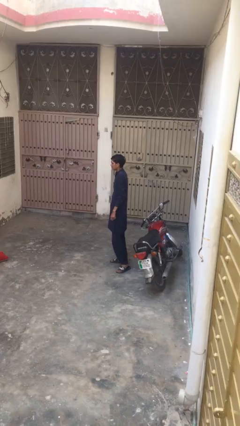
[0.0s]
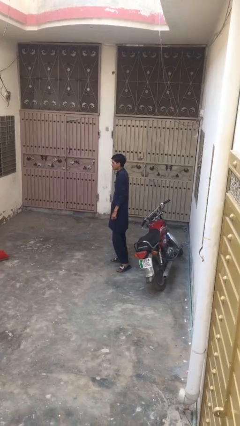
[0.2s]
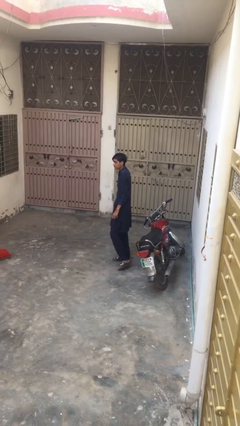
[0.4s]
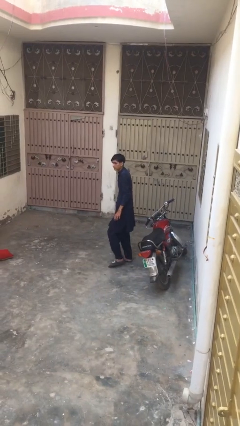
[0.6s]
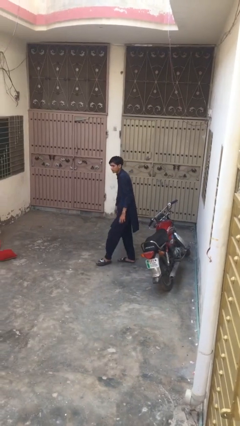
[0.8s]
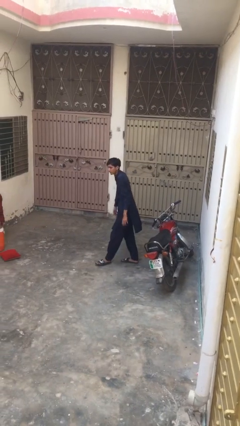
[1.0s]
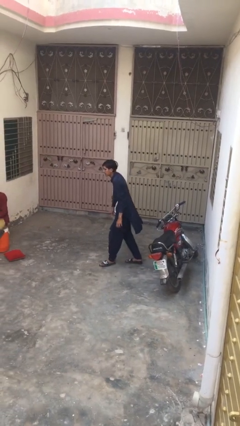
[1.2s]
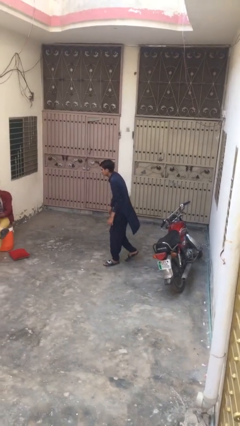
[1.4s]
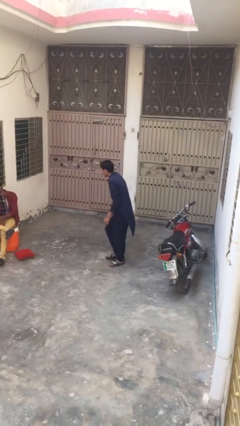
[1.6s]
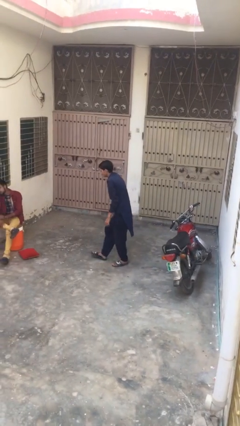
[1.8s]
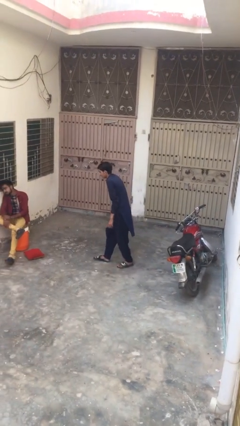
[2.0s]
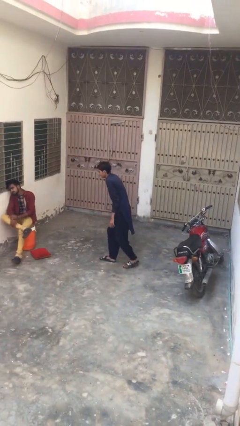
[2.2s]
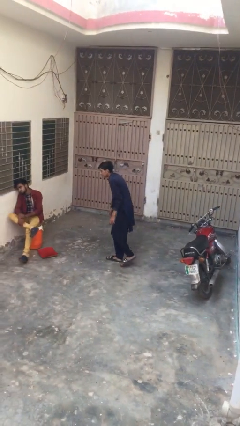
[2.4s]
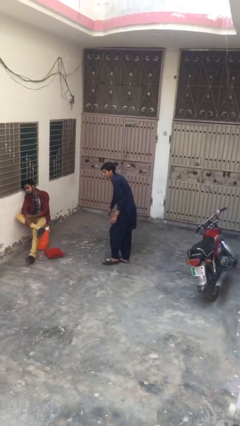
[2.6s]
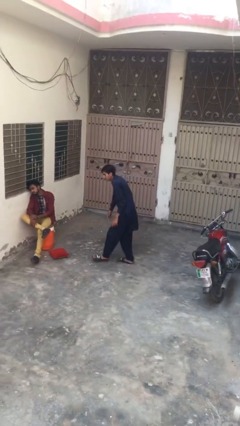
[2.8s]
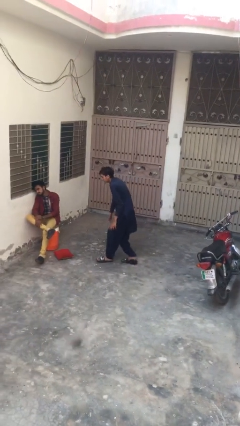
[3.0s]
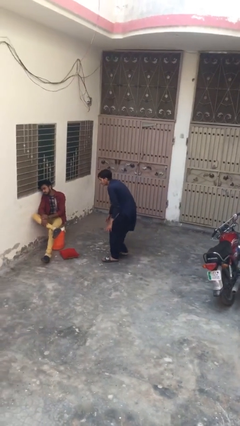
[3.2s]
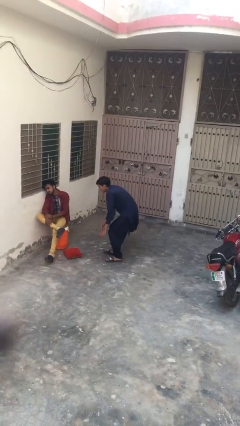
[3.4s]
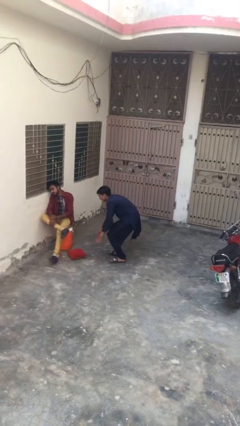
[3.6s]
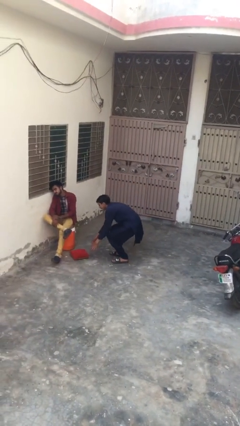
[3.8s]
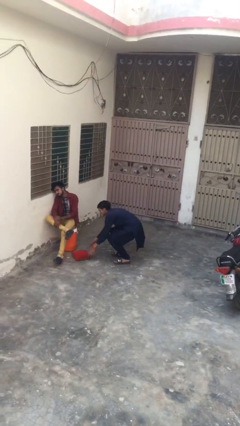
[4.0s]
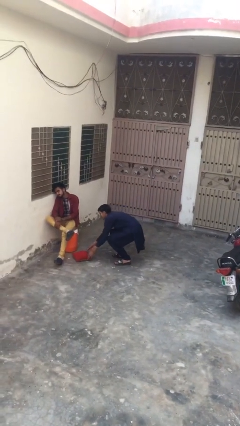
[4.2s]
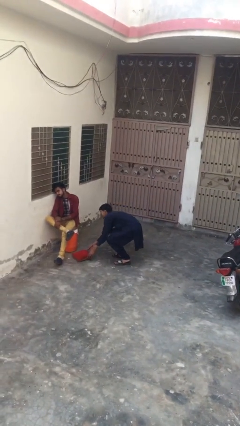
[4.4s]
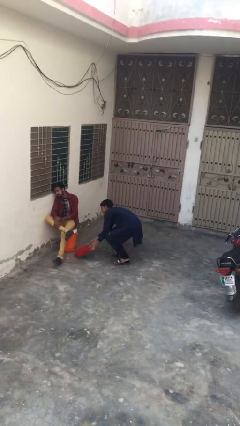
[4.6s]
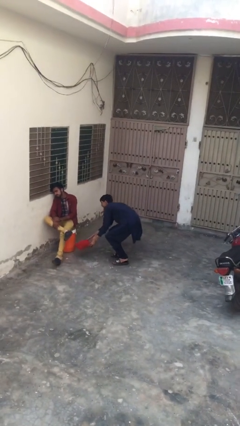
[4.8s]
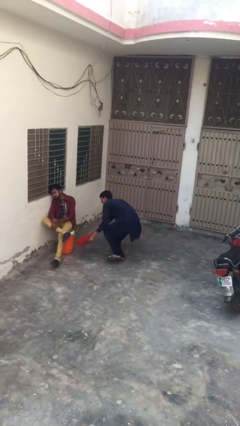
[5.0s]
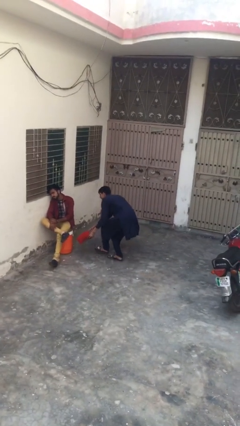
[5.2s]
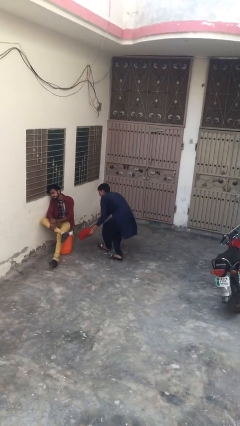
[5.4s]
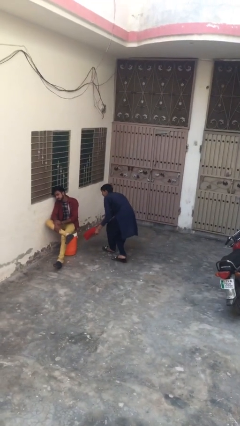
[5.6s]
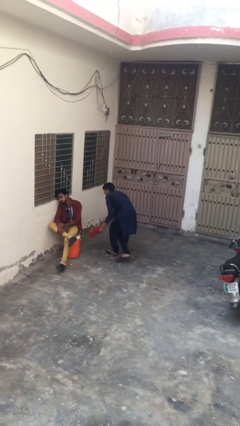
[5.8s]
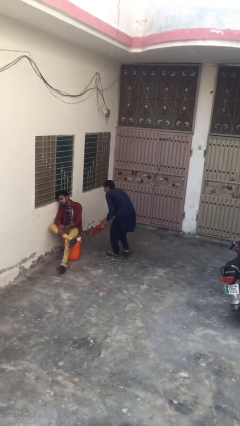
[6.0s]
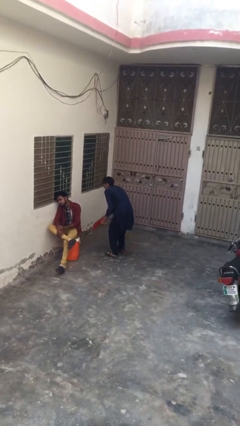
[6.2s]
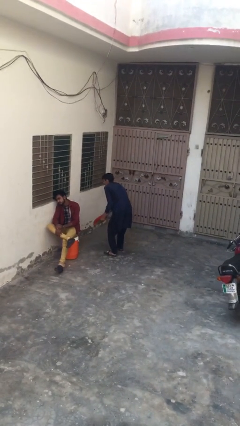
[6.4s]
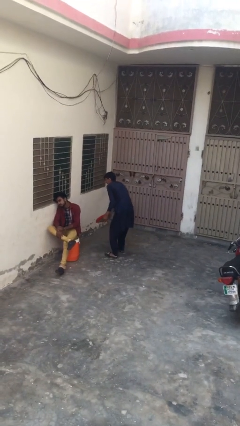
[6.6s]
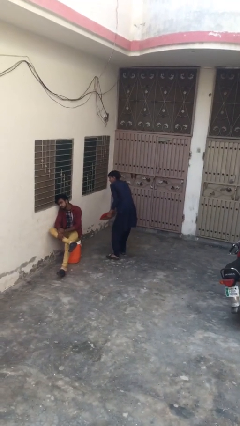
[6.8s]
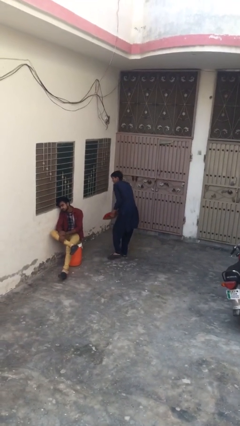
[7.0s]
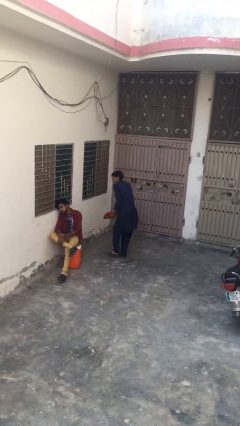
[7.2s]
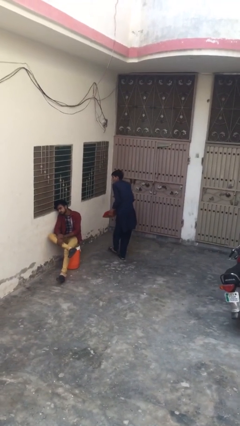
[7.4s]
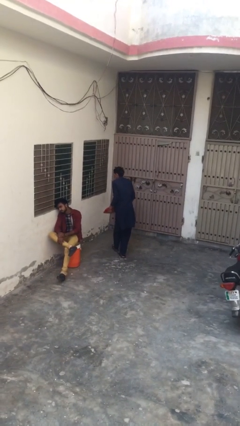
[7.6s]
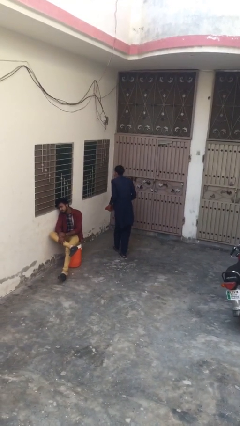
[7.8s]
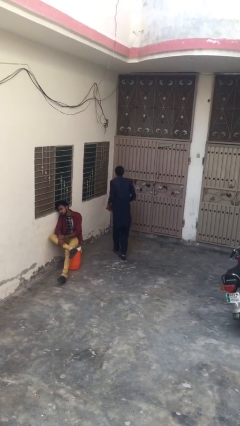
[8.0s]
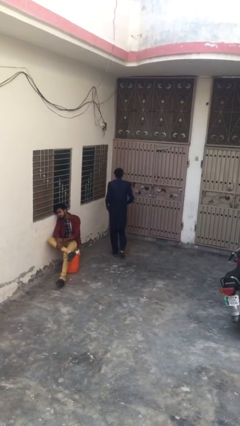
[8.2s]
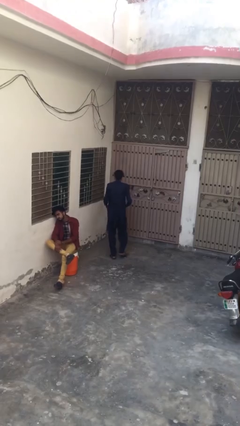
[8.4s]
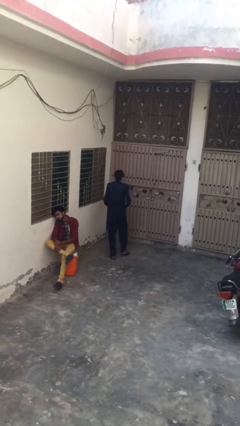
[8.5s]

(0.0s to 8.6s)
person steals object from person

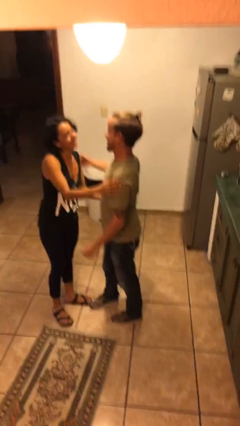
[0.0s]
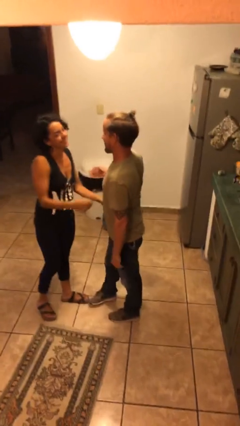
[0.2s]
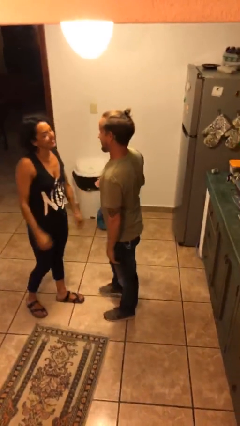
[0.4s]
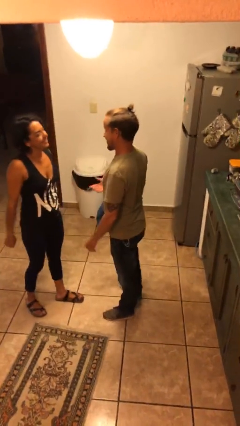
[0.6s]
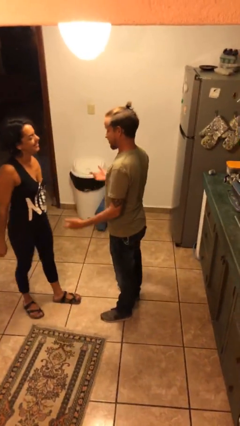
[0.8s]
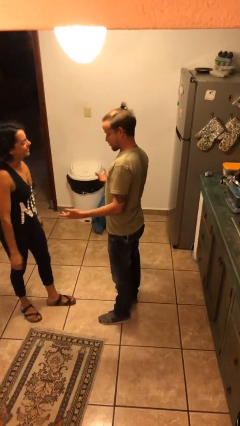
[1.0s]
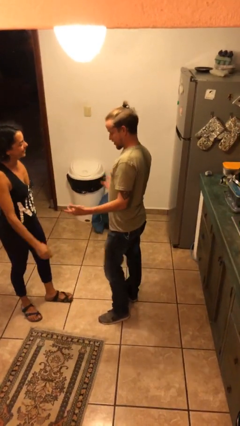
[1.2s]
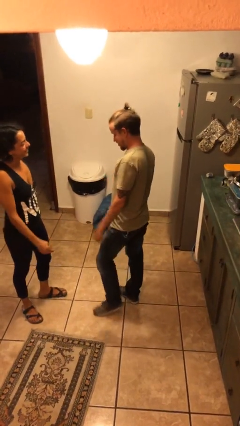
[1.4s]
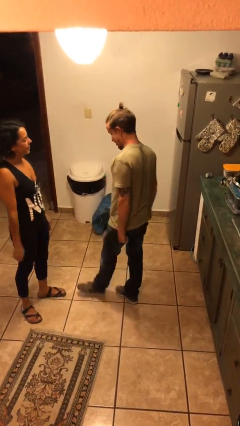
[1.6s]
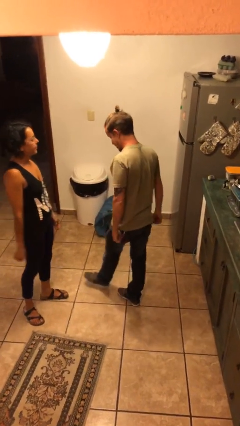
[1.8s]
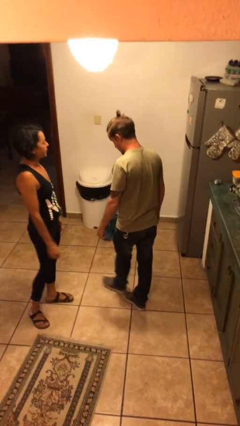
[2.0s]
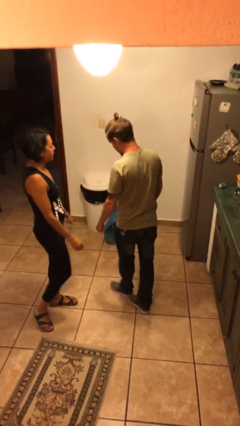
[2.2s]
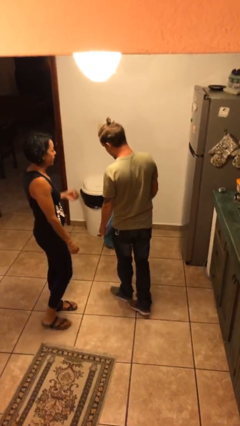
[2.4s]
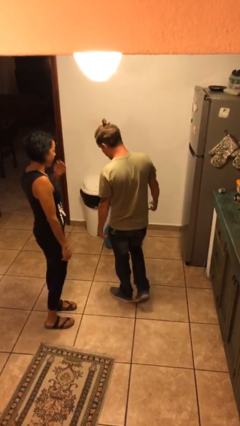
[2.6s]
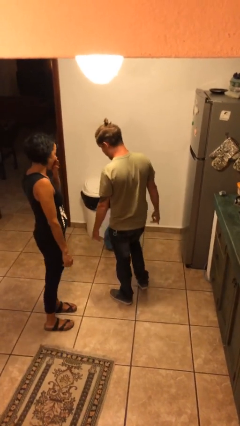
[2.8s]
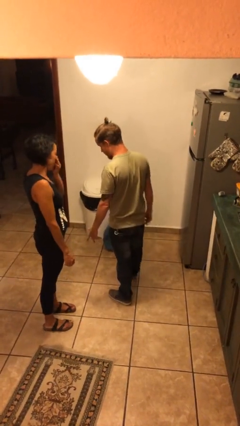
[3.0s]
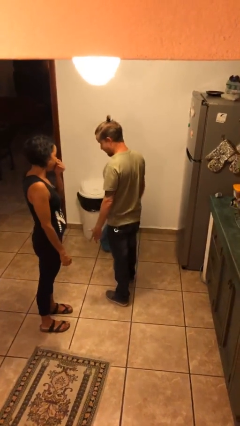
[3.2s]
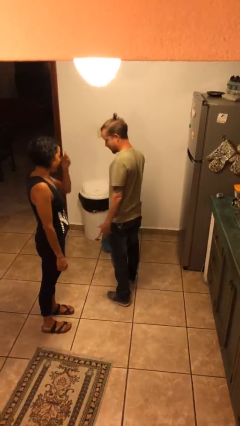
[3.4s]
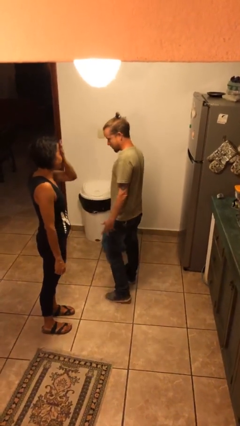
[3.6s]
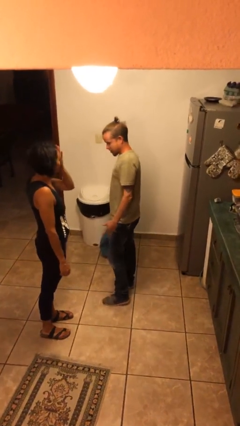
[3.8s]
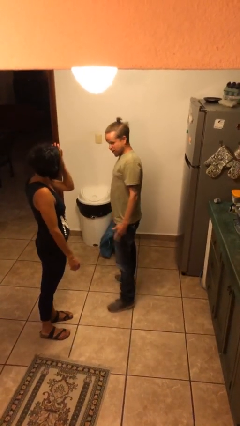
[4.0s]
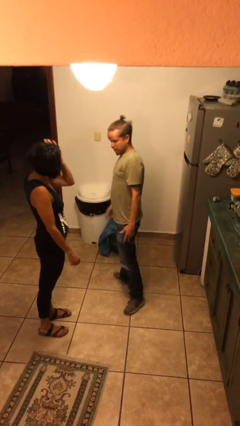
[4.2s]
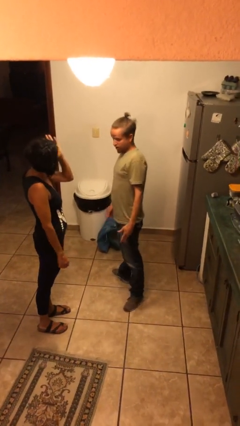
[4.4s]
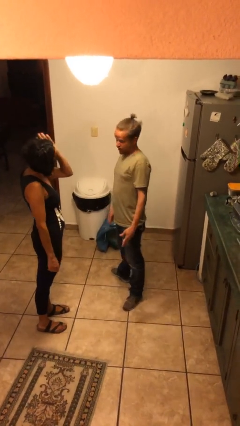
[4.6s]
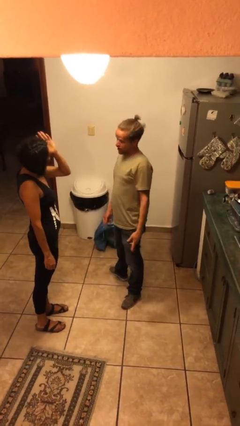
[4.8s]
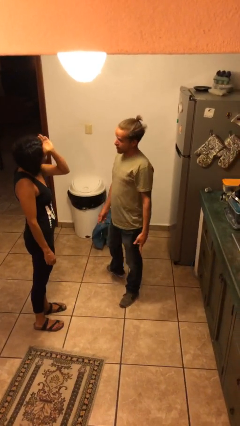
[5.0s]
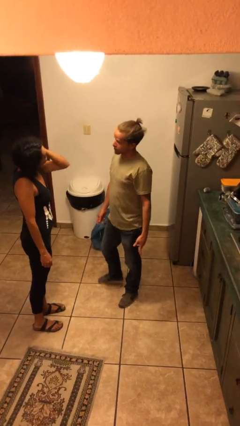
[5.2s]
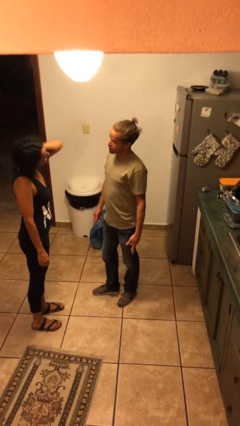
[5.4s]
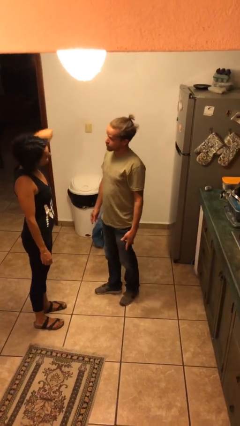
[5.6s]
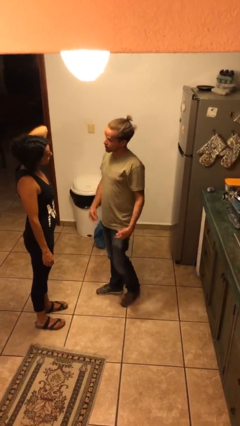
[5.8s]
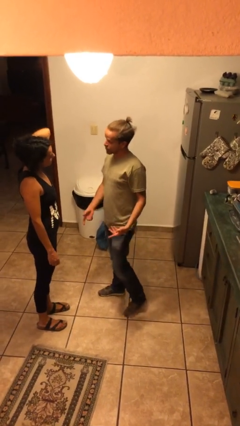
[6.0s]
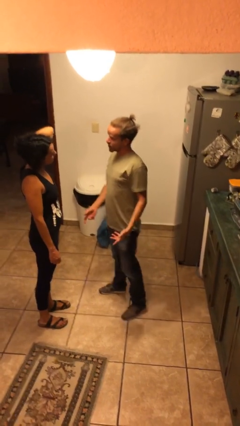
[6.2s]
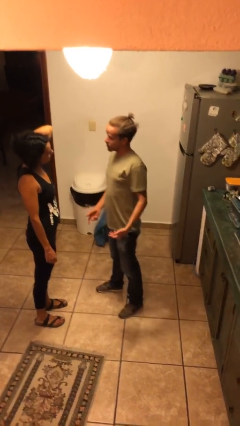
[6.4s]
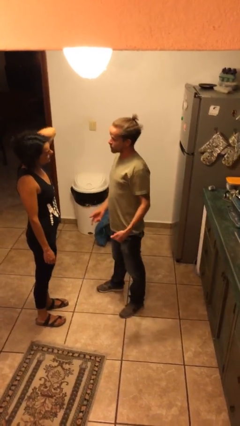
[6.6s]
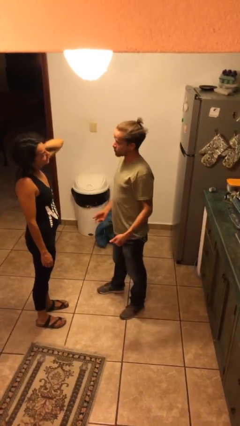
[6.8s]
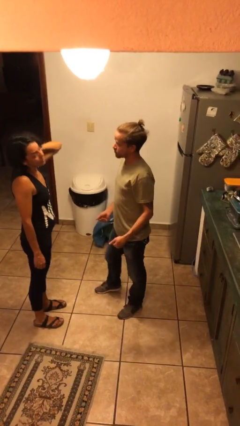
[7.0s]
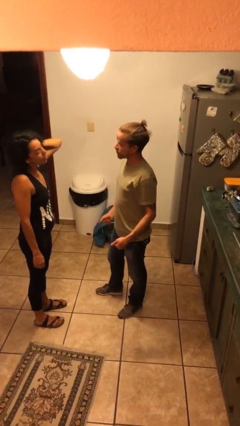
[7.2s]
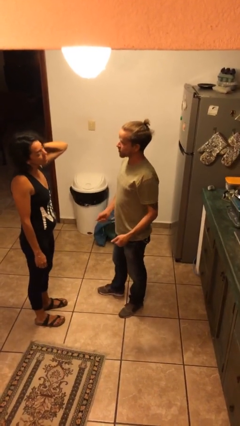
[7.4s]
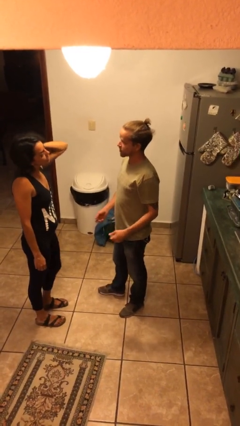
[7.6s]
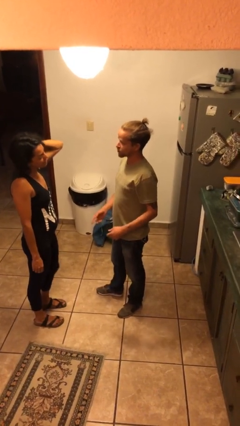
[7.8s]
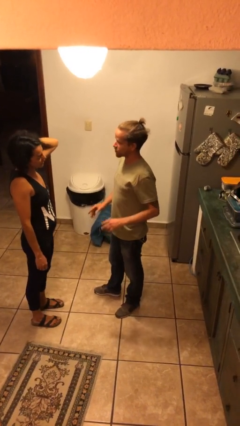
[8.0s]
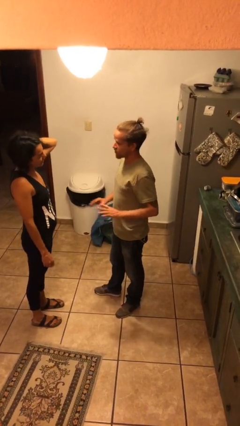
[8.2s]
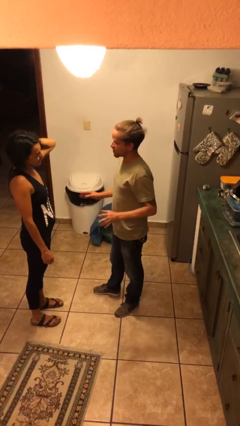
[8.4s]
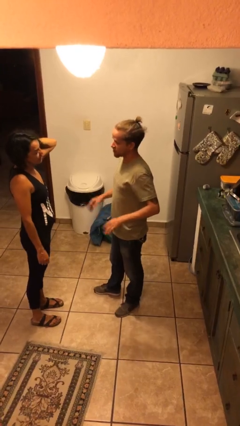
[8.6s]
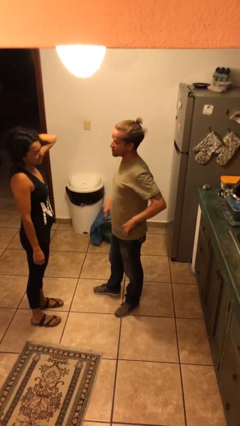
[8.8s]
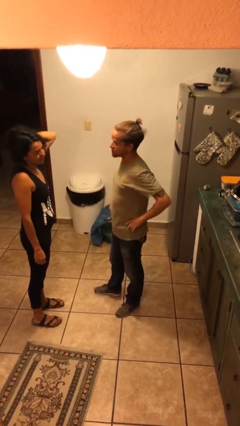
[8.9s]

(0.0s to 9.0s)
person talks to person

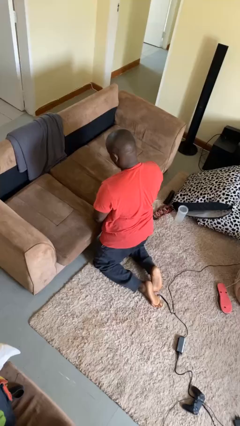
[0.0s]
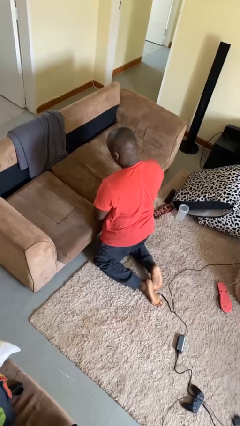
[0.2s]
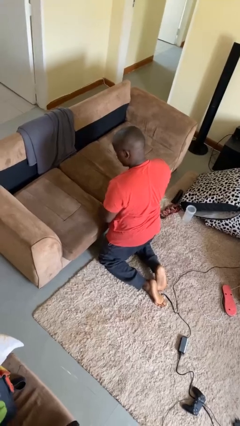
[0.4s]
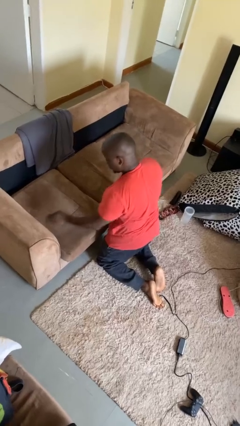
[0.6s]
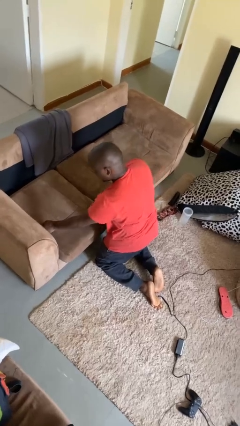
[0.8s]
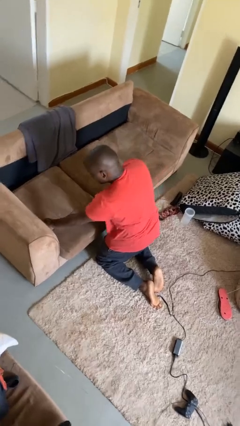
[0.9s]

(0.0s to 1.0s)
person searches in couch
